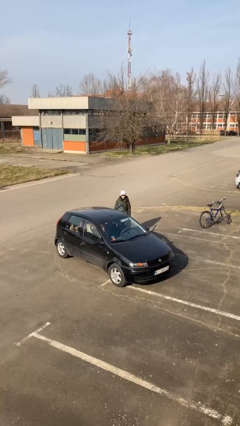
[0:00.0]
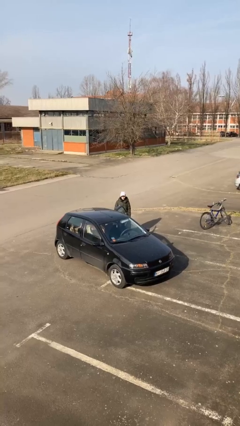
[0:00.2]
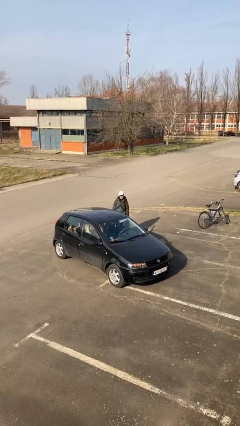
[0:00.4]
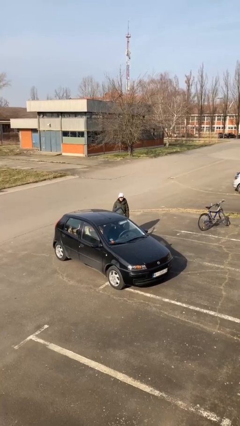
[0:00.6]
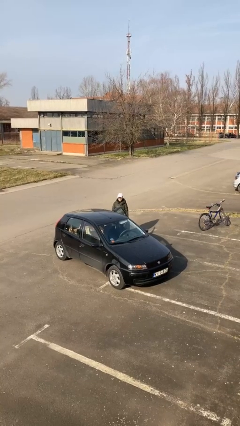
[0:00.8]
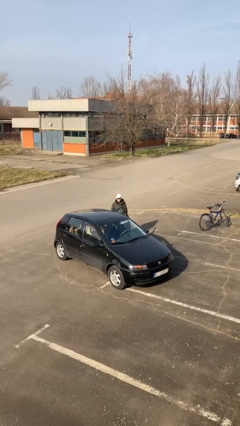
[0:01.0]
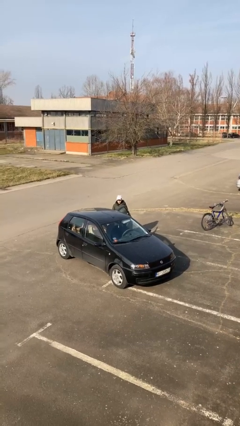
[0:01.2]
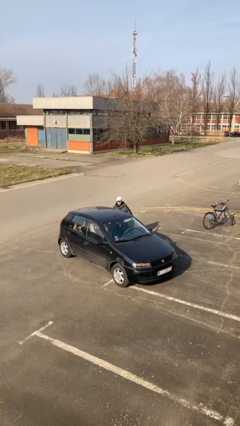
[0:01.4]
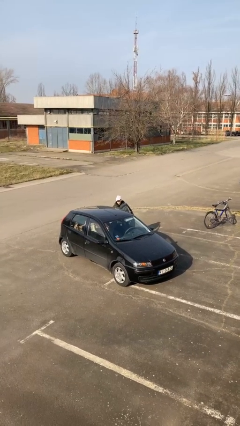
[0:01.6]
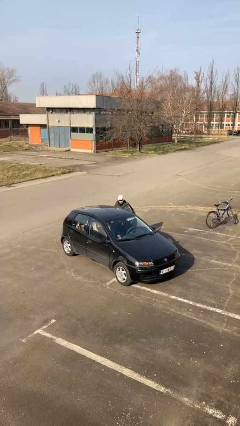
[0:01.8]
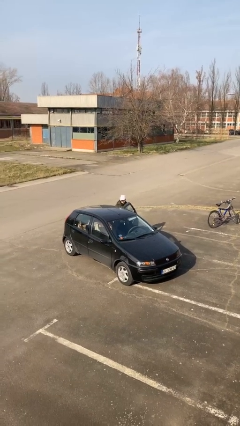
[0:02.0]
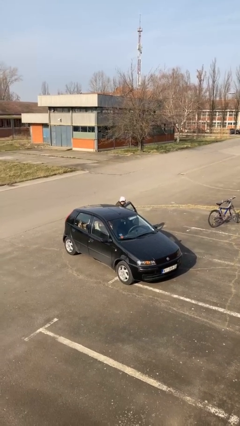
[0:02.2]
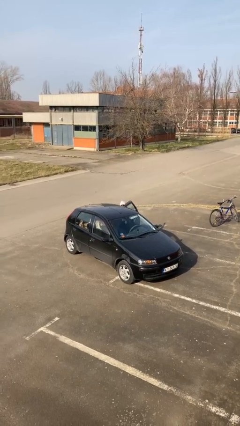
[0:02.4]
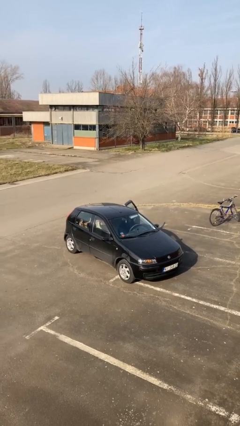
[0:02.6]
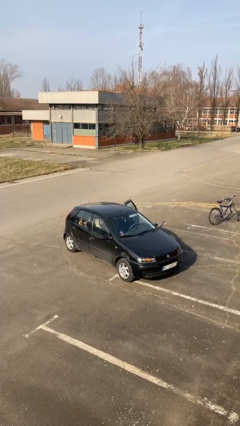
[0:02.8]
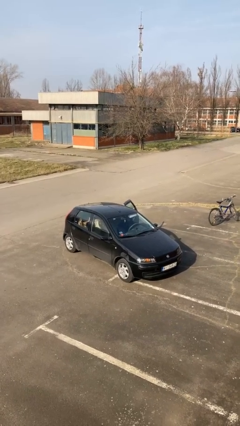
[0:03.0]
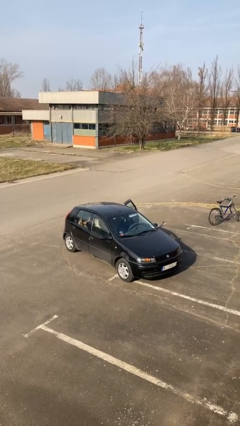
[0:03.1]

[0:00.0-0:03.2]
person enters car

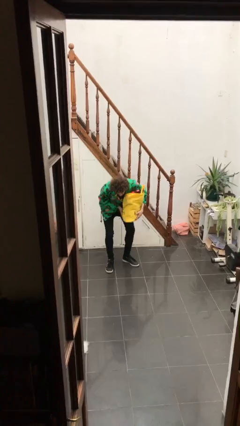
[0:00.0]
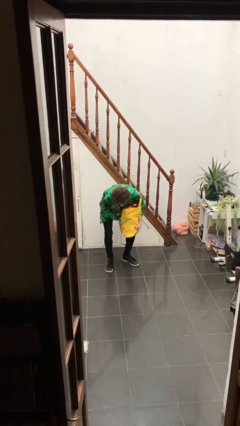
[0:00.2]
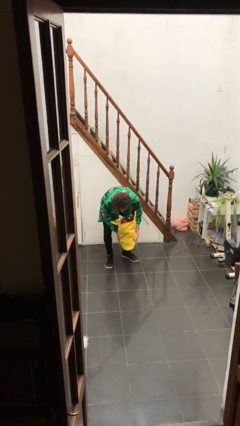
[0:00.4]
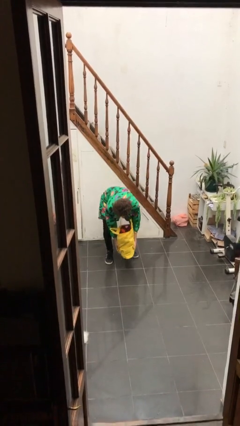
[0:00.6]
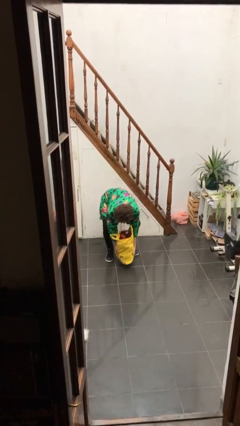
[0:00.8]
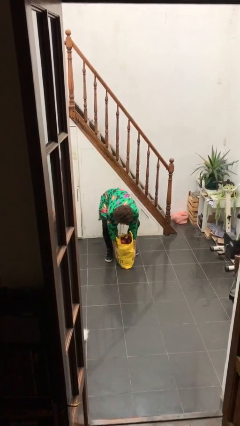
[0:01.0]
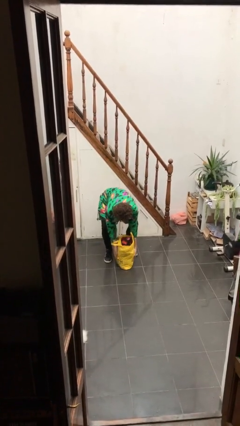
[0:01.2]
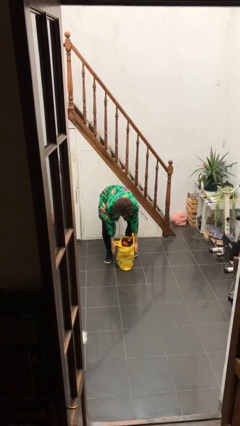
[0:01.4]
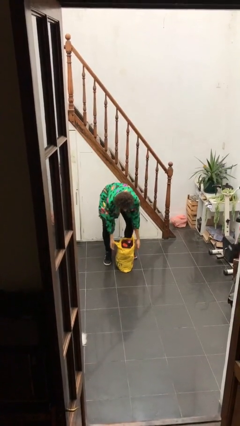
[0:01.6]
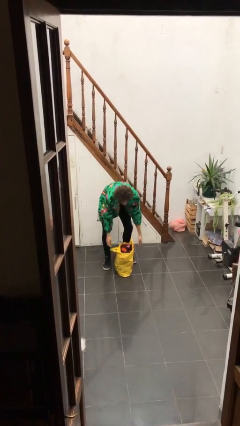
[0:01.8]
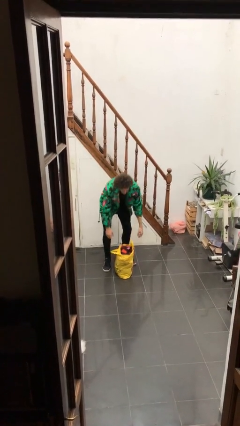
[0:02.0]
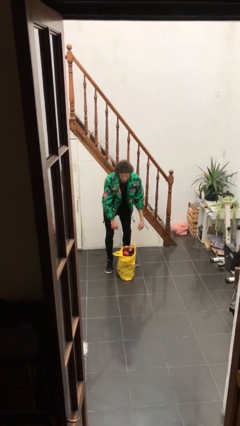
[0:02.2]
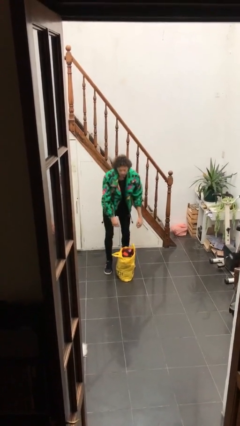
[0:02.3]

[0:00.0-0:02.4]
person puts down object on floor

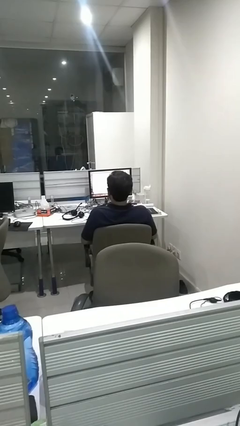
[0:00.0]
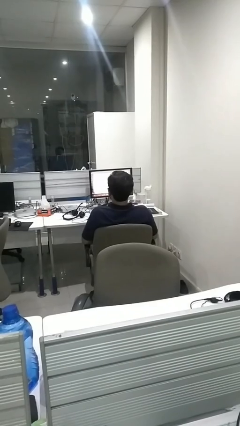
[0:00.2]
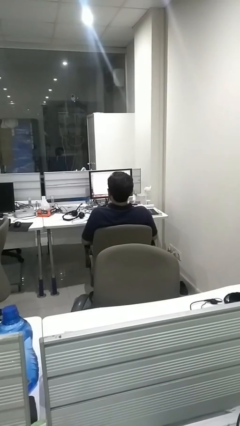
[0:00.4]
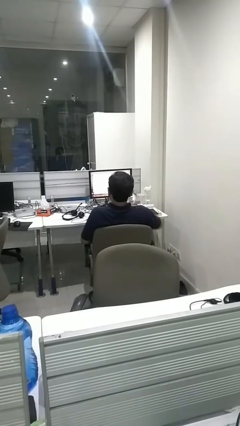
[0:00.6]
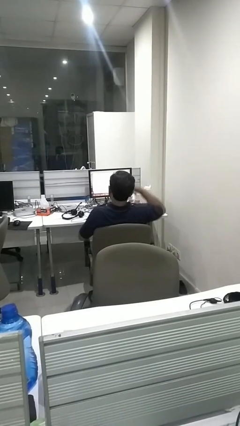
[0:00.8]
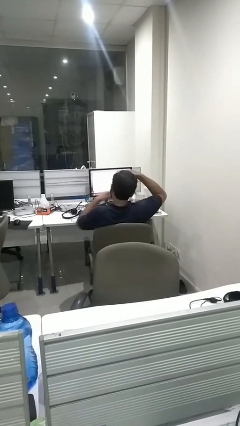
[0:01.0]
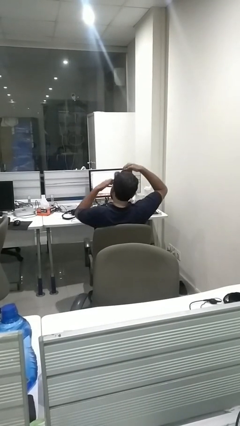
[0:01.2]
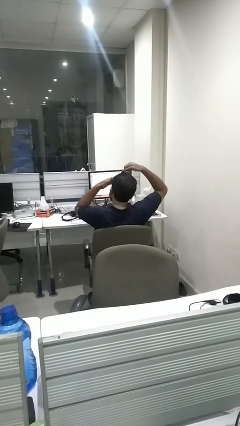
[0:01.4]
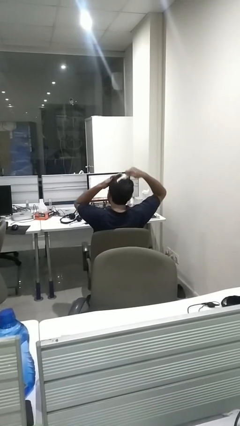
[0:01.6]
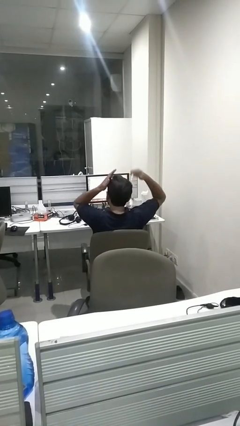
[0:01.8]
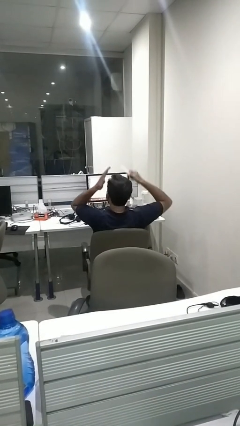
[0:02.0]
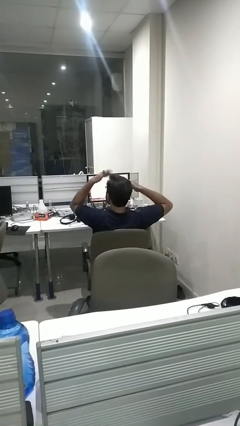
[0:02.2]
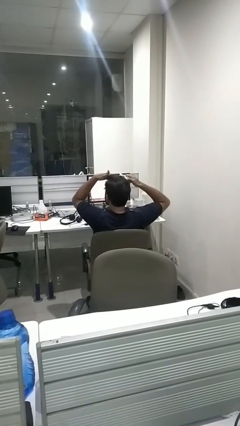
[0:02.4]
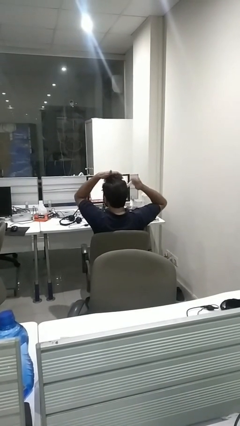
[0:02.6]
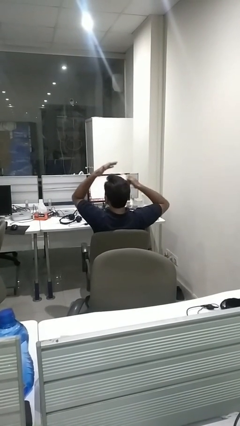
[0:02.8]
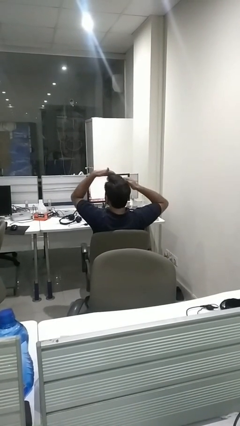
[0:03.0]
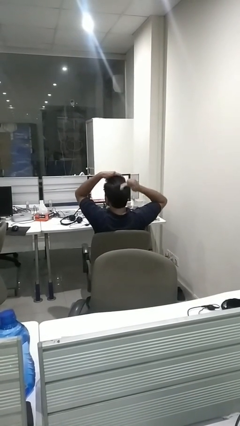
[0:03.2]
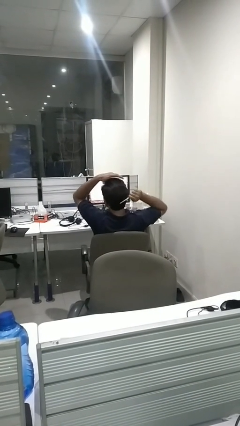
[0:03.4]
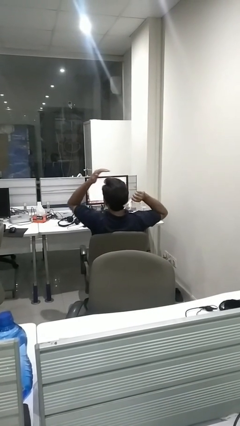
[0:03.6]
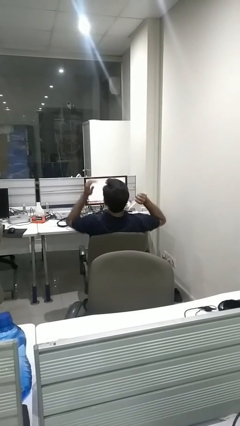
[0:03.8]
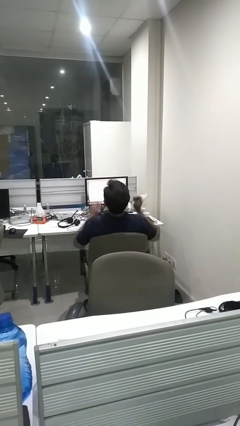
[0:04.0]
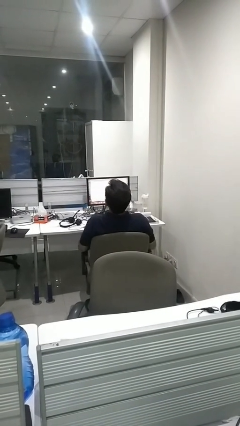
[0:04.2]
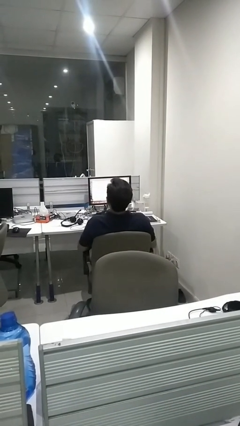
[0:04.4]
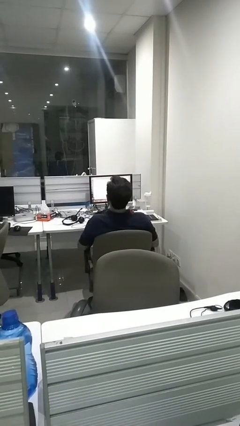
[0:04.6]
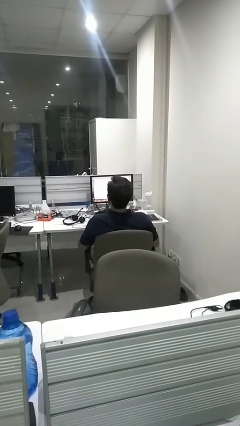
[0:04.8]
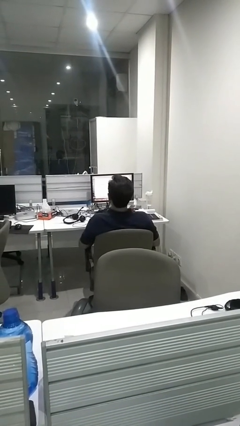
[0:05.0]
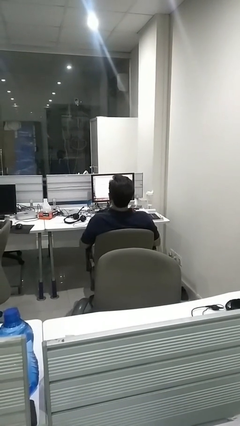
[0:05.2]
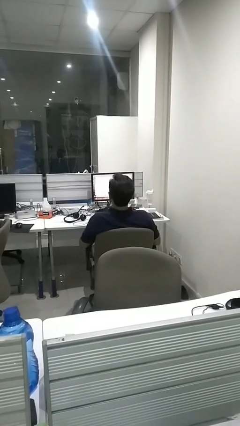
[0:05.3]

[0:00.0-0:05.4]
person brushes hair

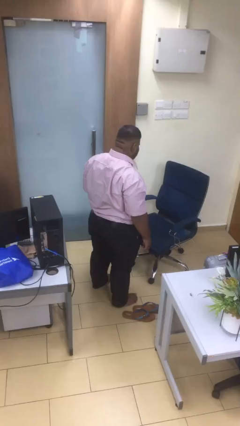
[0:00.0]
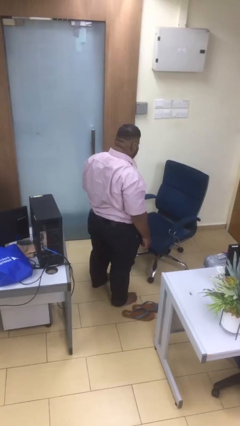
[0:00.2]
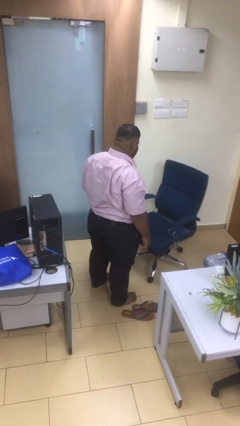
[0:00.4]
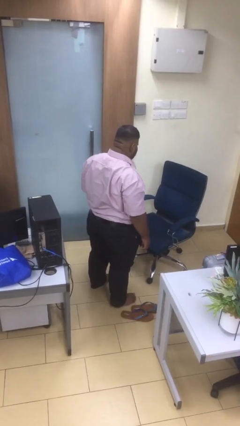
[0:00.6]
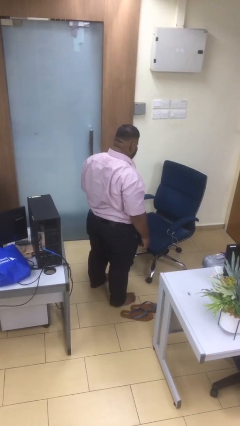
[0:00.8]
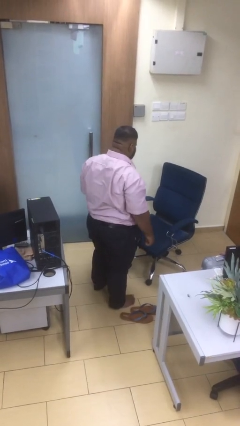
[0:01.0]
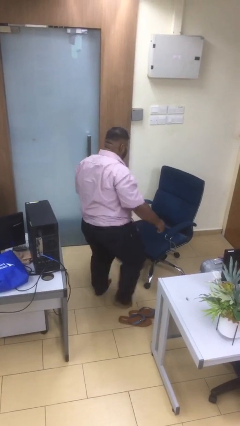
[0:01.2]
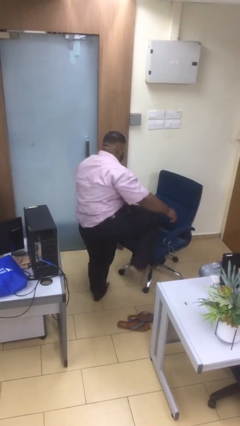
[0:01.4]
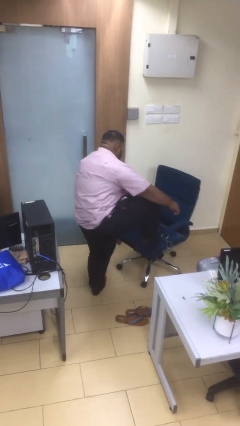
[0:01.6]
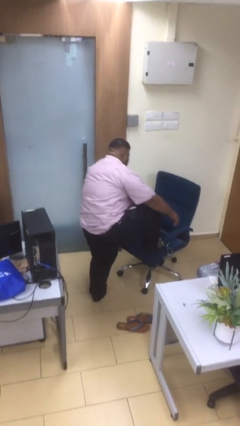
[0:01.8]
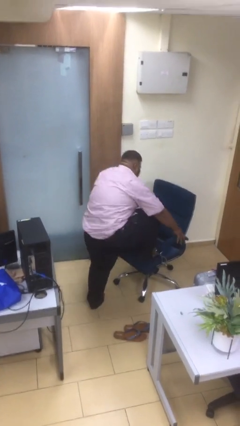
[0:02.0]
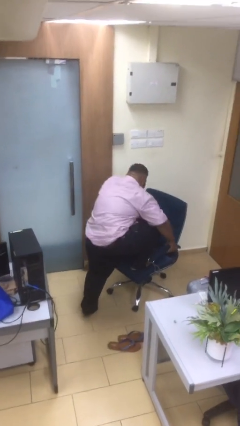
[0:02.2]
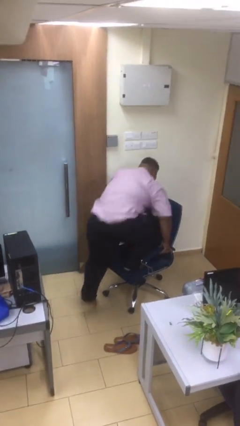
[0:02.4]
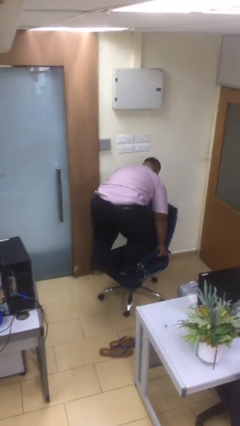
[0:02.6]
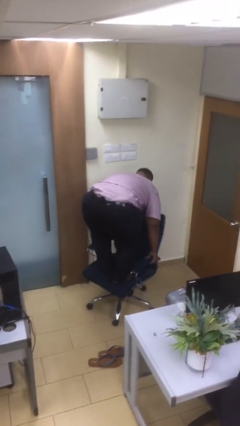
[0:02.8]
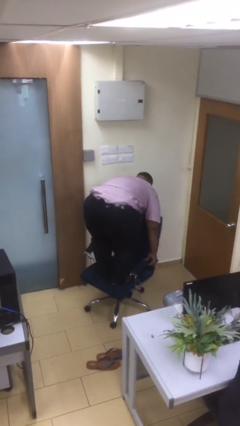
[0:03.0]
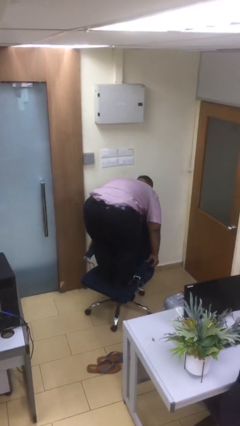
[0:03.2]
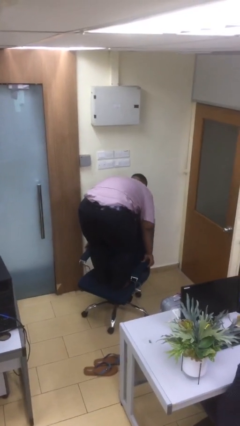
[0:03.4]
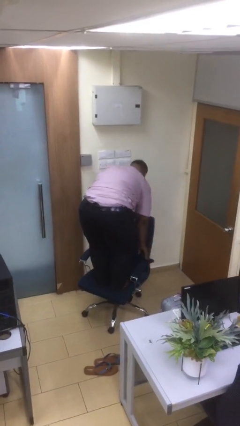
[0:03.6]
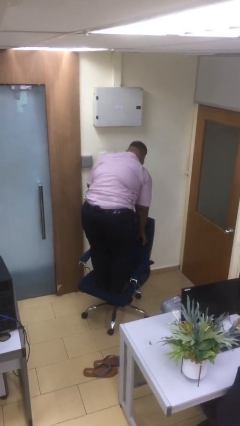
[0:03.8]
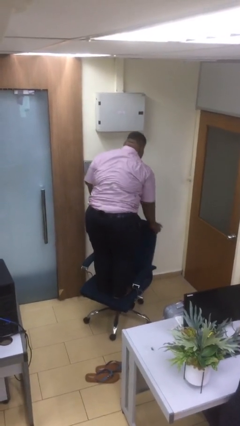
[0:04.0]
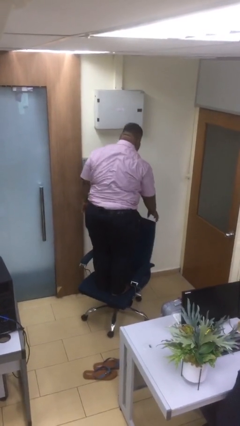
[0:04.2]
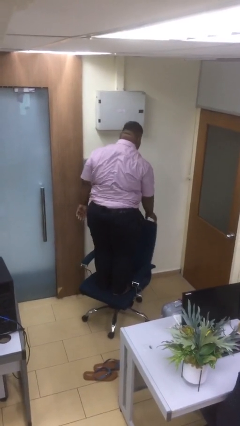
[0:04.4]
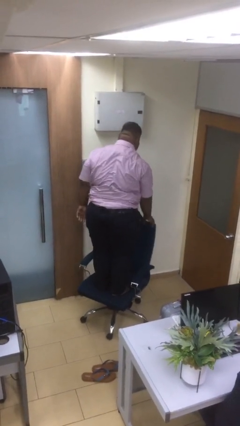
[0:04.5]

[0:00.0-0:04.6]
person climbs on chair

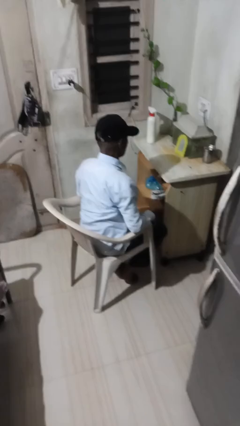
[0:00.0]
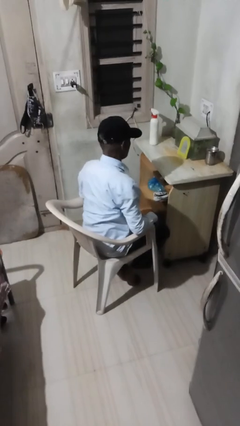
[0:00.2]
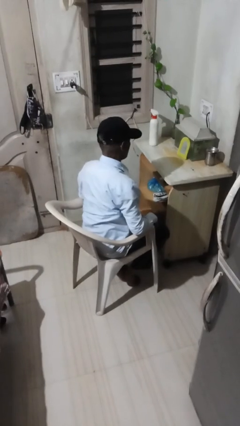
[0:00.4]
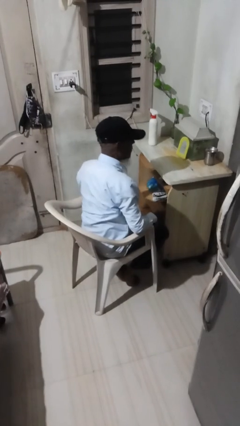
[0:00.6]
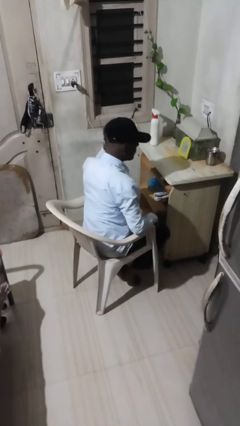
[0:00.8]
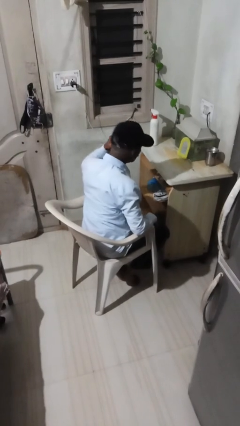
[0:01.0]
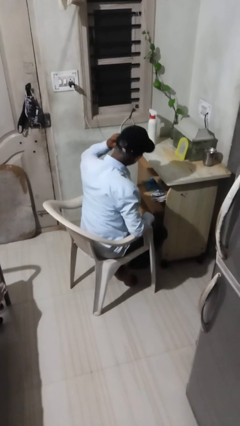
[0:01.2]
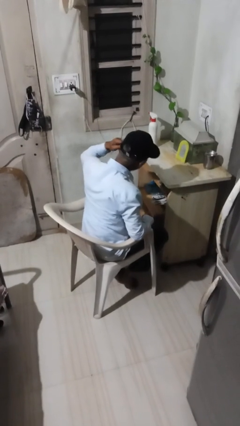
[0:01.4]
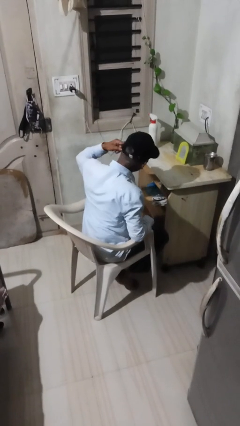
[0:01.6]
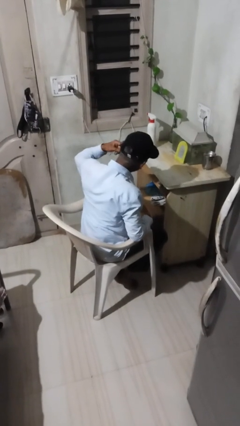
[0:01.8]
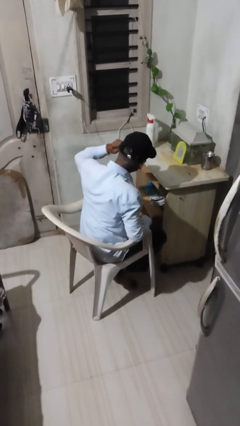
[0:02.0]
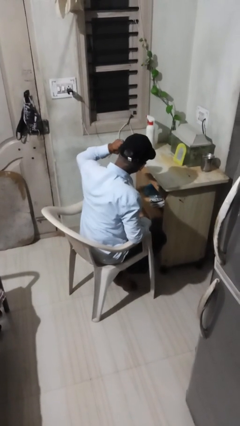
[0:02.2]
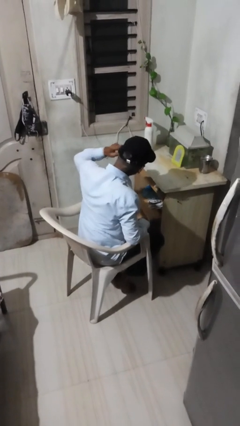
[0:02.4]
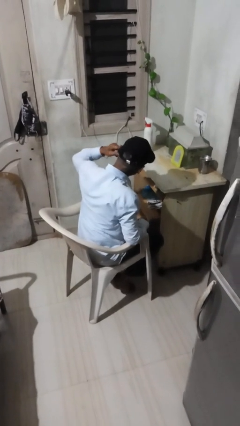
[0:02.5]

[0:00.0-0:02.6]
person puts fingers in ear
